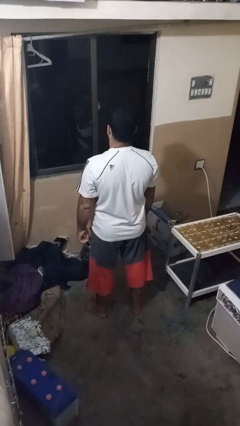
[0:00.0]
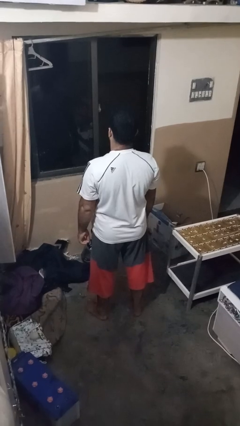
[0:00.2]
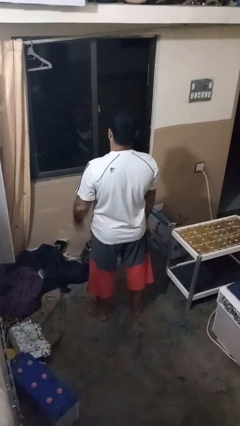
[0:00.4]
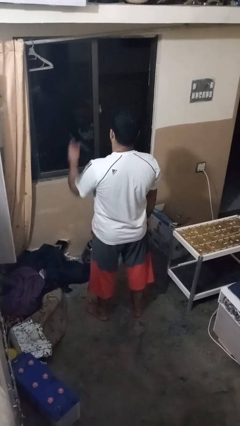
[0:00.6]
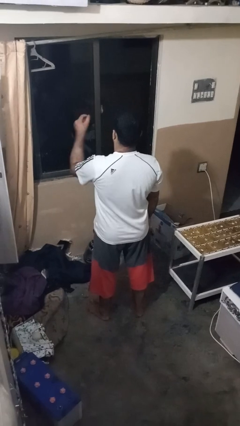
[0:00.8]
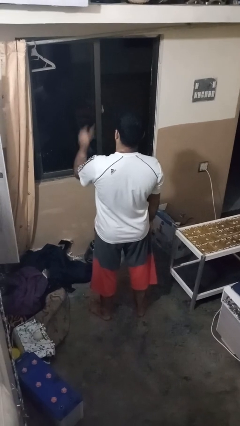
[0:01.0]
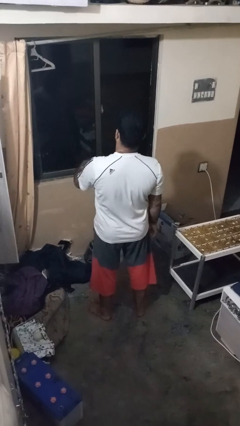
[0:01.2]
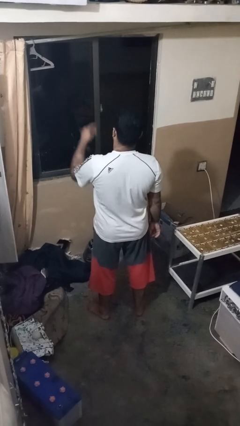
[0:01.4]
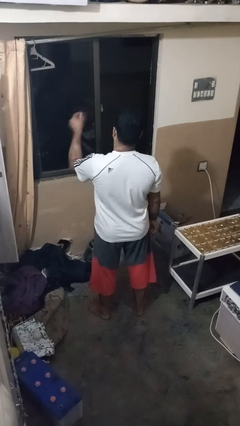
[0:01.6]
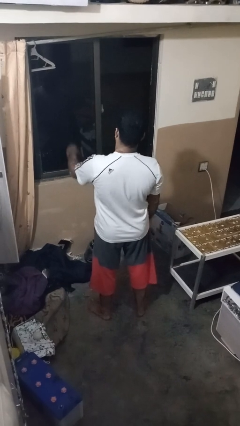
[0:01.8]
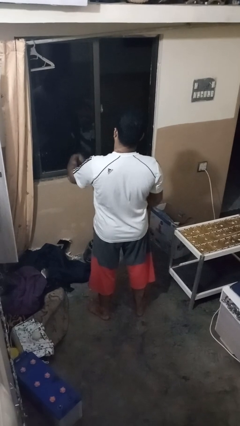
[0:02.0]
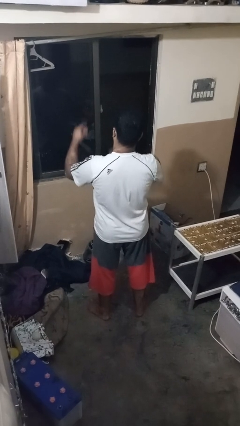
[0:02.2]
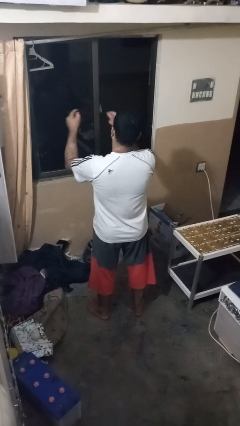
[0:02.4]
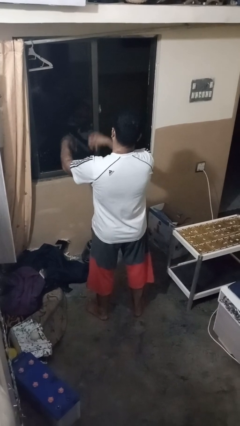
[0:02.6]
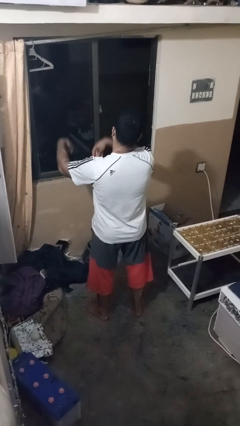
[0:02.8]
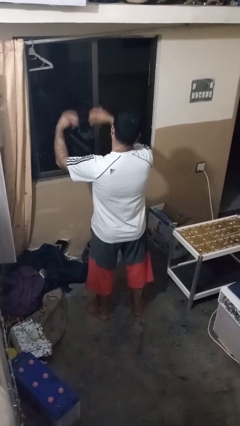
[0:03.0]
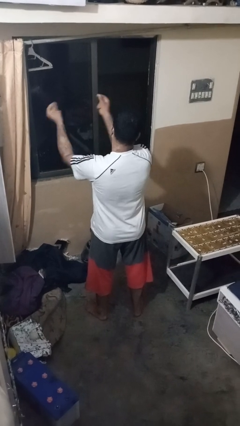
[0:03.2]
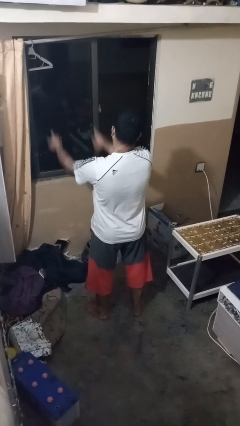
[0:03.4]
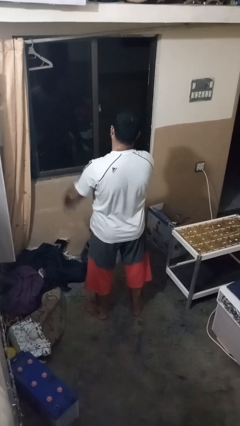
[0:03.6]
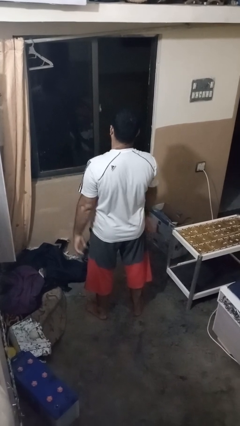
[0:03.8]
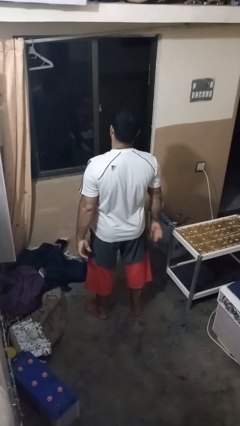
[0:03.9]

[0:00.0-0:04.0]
person snaps fingers

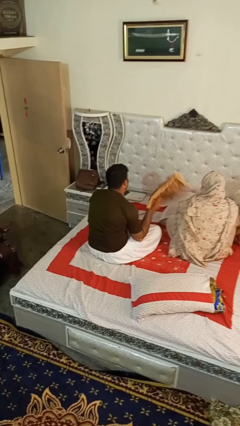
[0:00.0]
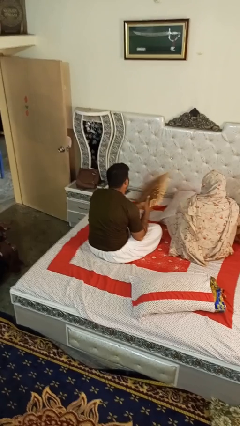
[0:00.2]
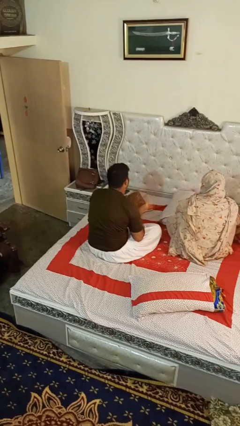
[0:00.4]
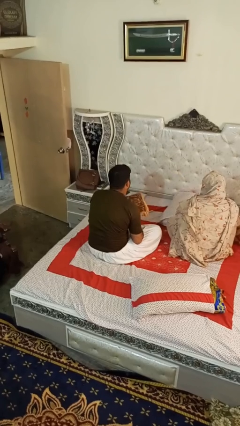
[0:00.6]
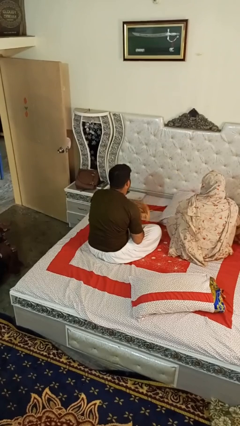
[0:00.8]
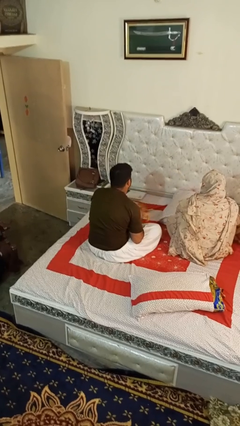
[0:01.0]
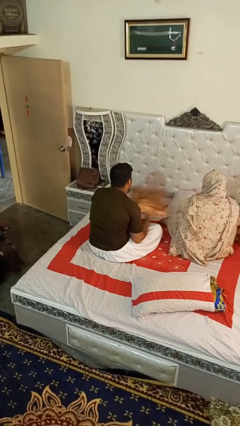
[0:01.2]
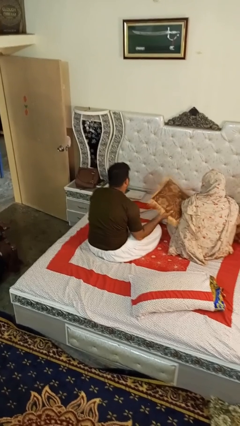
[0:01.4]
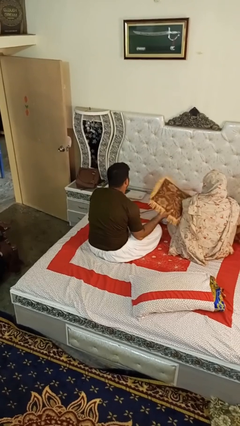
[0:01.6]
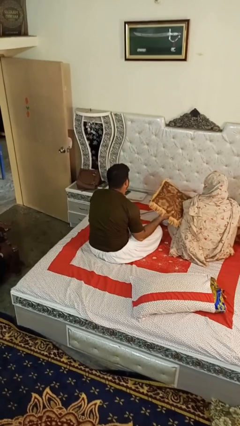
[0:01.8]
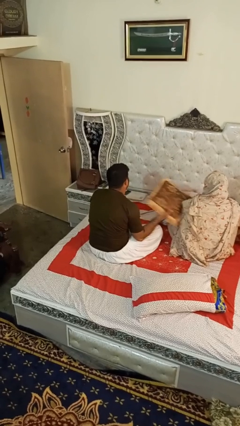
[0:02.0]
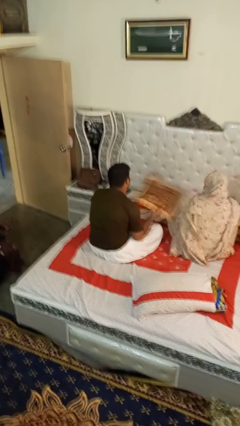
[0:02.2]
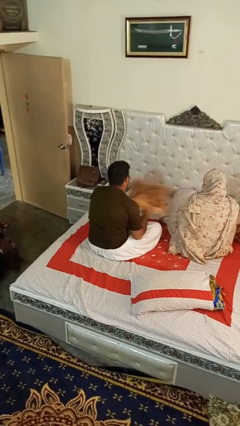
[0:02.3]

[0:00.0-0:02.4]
person hits person with pillow

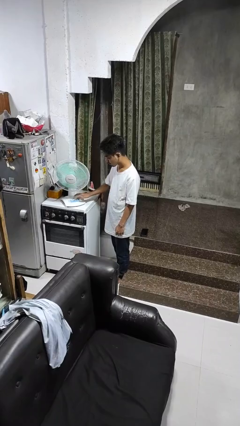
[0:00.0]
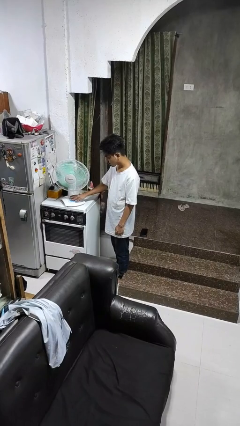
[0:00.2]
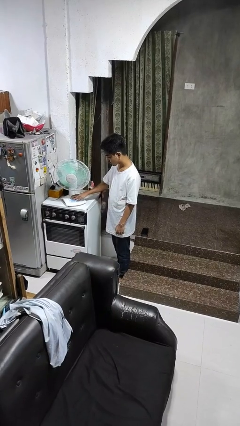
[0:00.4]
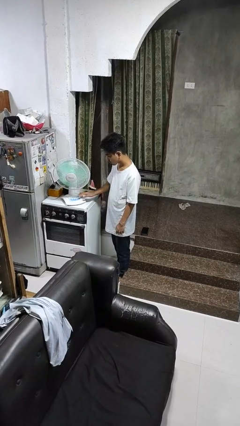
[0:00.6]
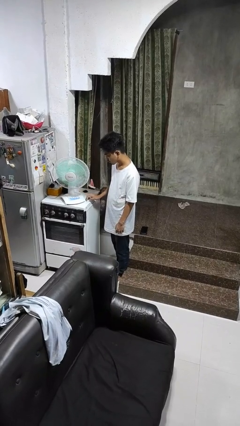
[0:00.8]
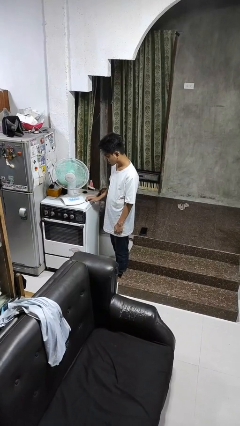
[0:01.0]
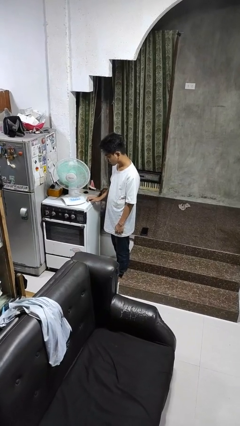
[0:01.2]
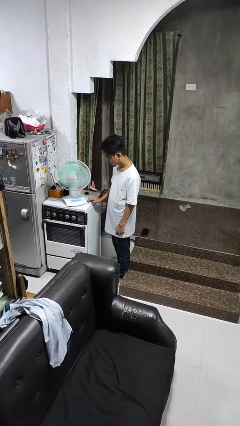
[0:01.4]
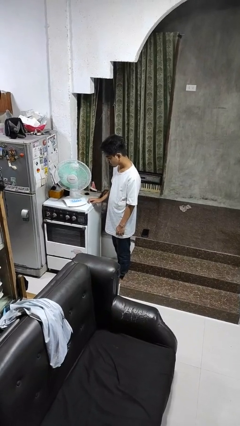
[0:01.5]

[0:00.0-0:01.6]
person turns off fan

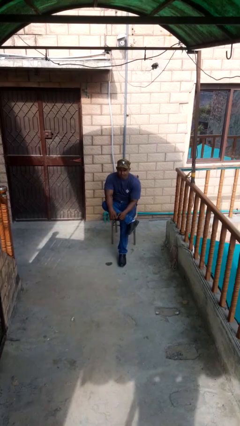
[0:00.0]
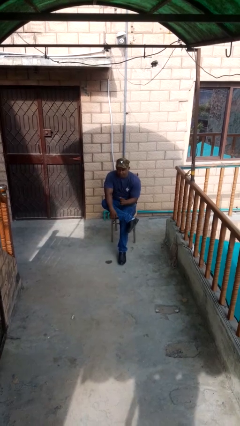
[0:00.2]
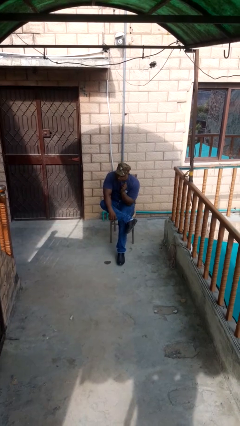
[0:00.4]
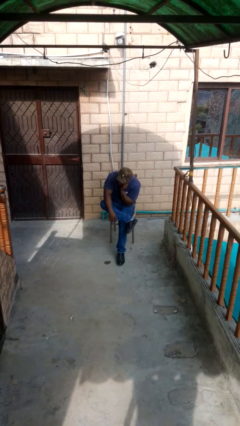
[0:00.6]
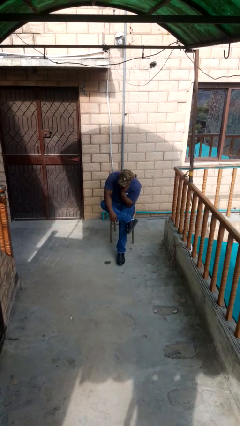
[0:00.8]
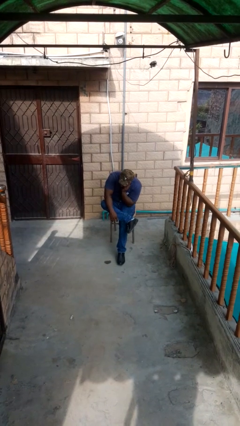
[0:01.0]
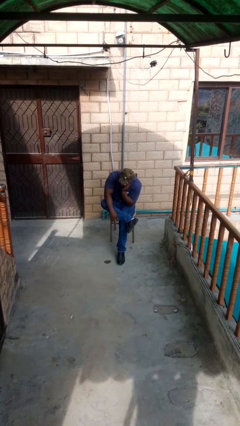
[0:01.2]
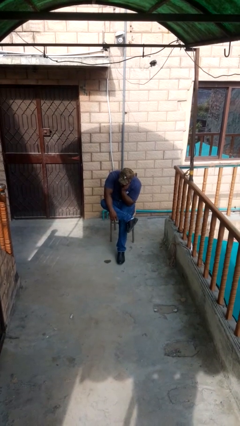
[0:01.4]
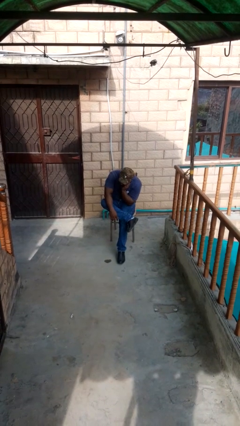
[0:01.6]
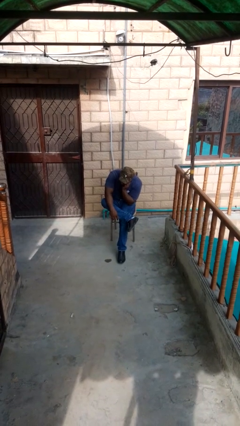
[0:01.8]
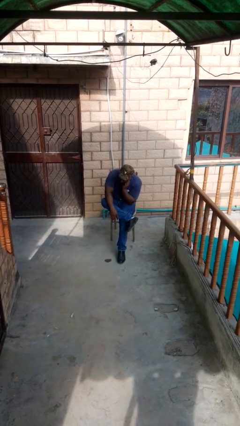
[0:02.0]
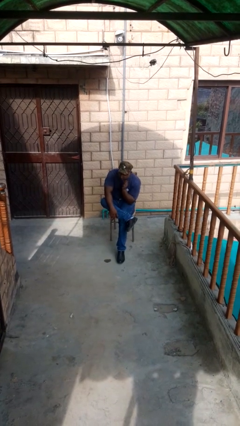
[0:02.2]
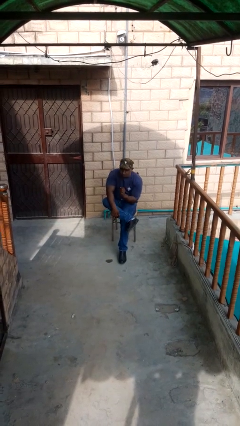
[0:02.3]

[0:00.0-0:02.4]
person strokes chin

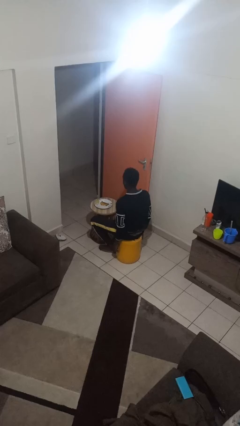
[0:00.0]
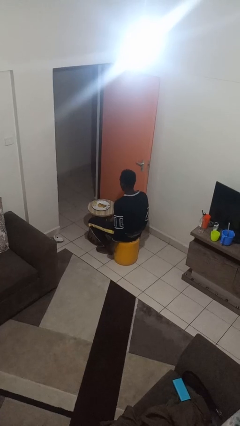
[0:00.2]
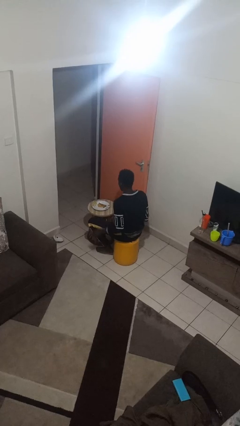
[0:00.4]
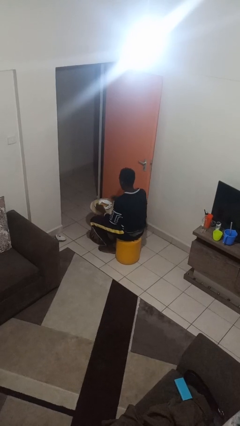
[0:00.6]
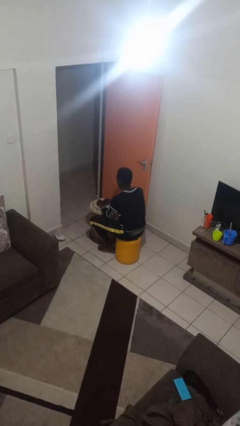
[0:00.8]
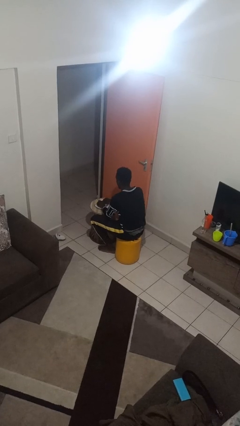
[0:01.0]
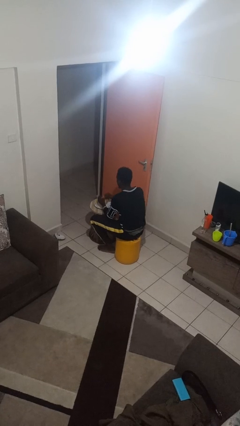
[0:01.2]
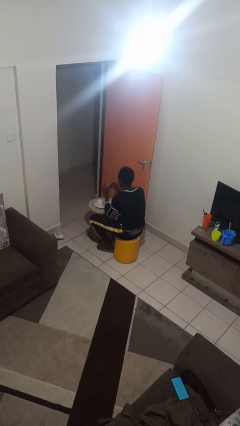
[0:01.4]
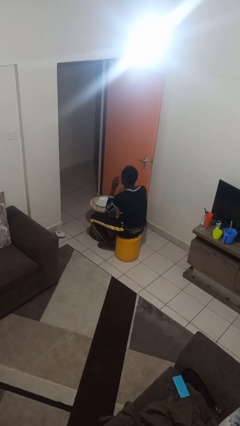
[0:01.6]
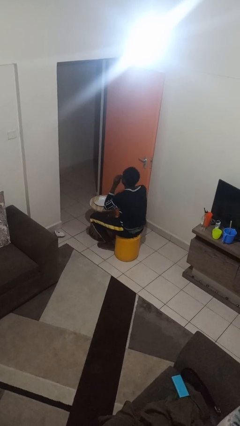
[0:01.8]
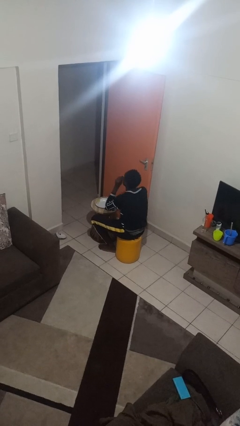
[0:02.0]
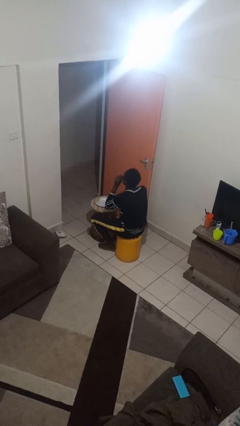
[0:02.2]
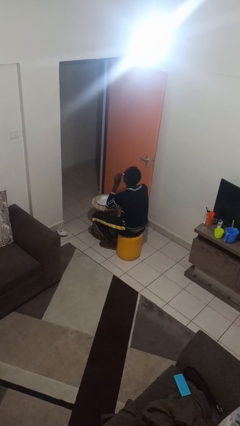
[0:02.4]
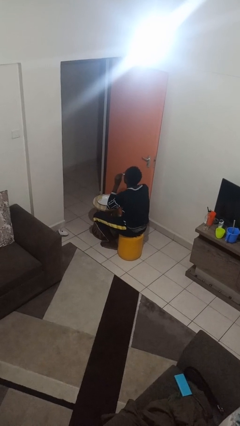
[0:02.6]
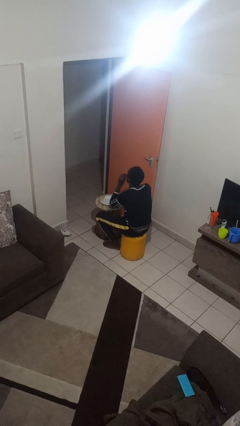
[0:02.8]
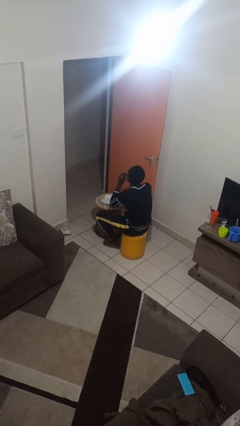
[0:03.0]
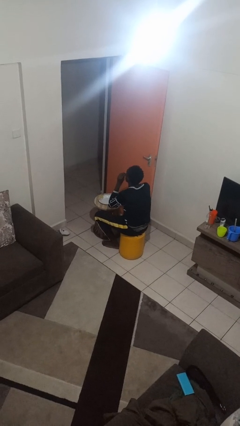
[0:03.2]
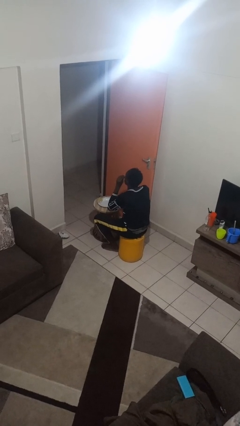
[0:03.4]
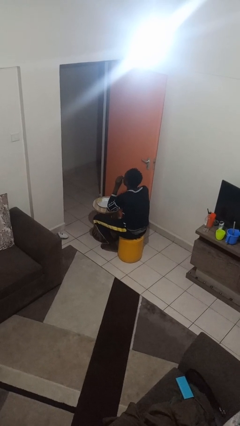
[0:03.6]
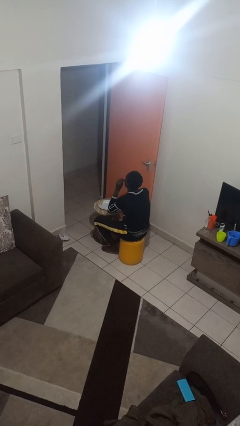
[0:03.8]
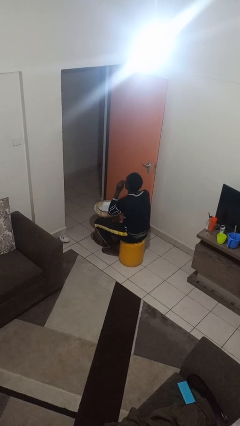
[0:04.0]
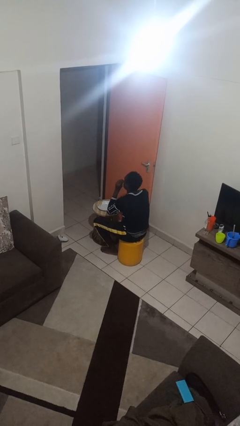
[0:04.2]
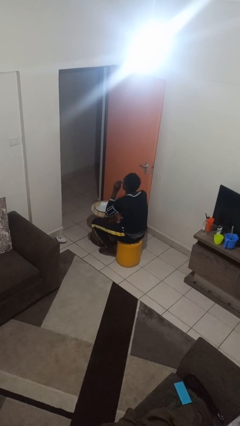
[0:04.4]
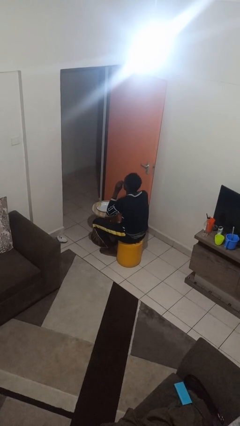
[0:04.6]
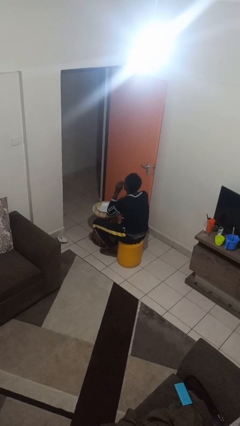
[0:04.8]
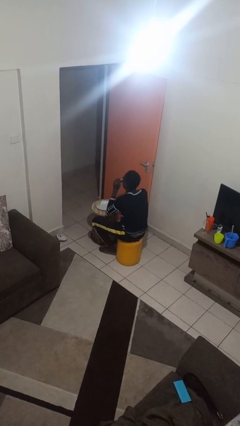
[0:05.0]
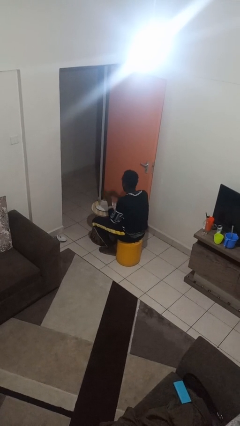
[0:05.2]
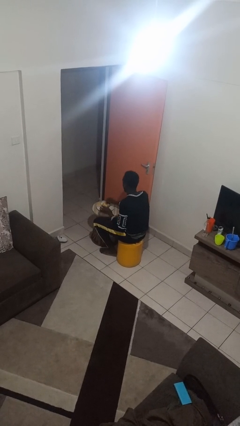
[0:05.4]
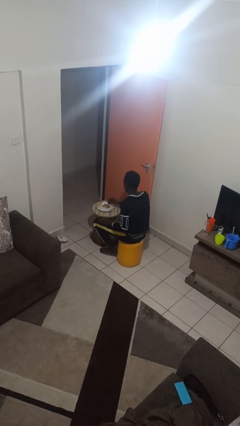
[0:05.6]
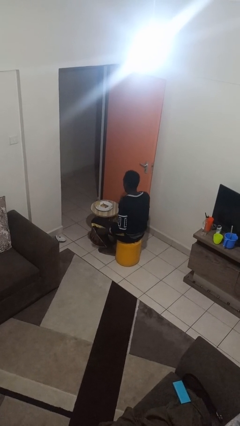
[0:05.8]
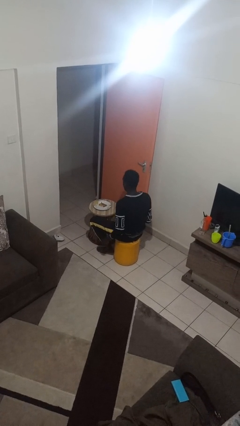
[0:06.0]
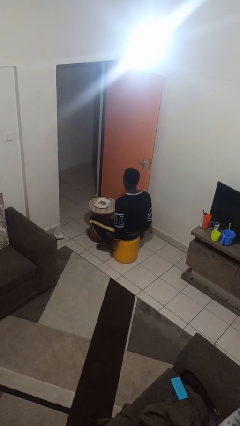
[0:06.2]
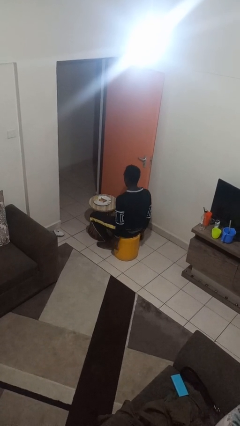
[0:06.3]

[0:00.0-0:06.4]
person eats with hands

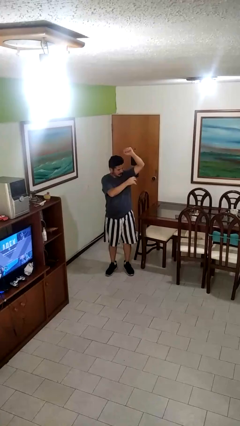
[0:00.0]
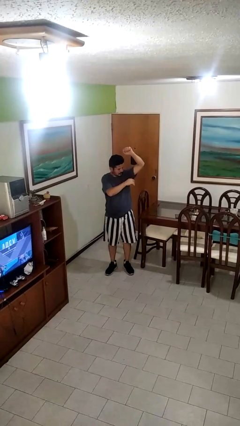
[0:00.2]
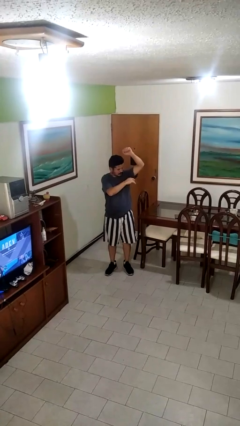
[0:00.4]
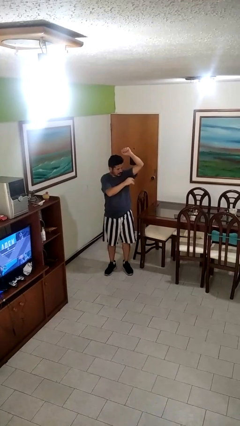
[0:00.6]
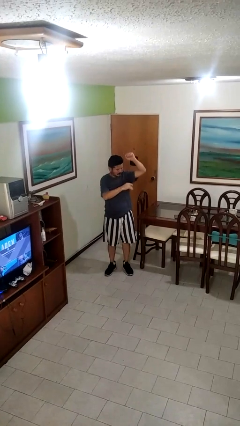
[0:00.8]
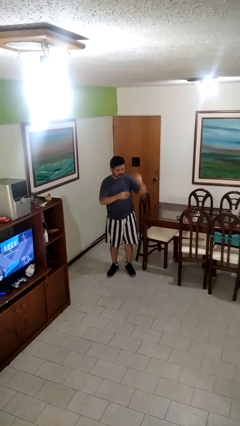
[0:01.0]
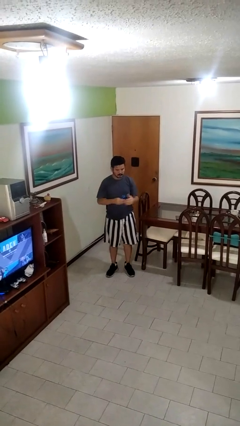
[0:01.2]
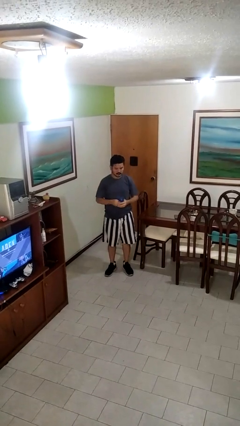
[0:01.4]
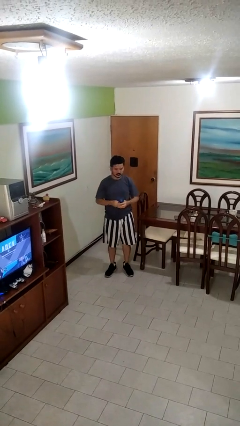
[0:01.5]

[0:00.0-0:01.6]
person applies deodorant
